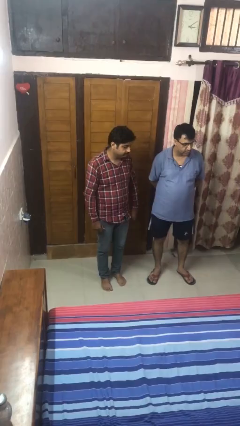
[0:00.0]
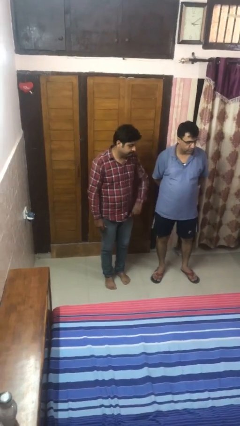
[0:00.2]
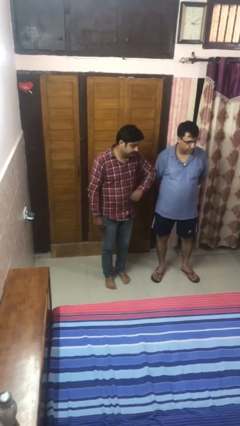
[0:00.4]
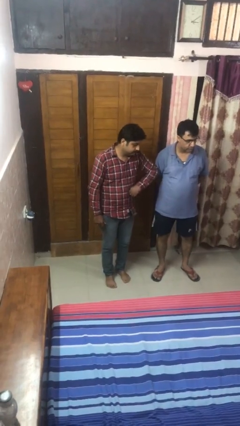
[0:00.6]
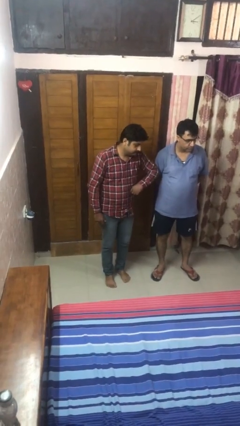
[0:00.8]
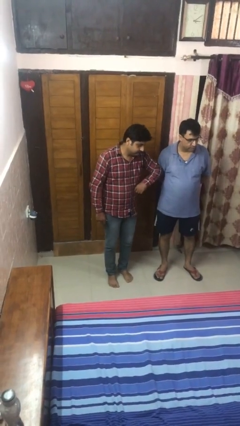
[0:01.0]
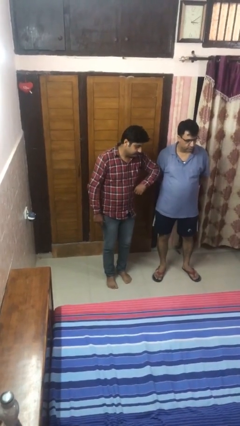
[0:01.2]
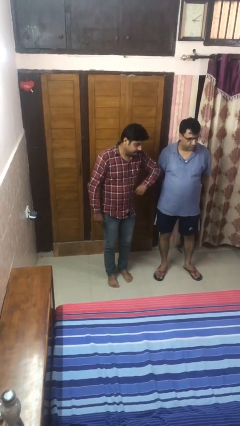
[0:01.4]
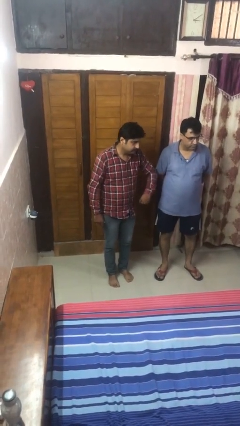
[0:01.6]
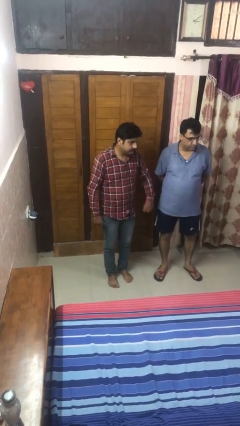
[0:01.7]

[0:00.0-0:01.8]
person nudges person with elbow

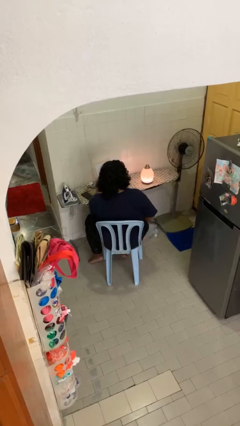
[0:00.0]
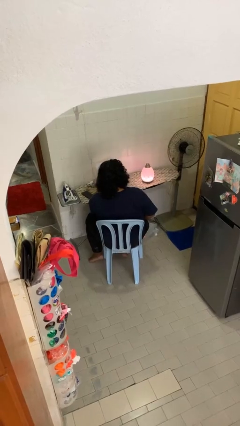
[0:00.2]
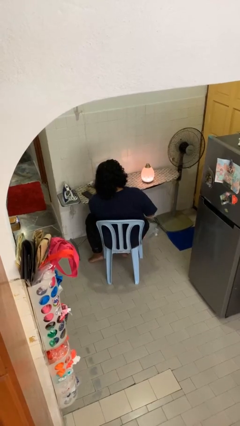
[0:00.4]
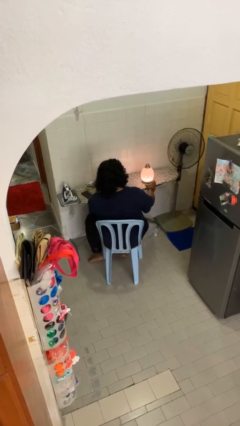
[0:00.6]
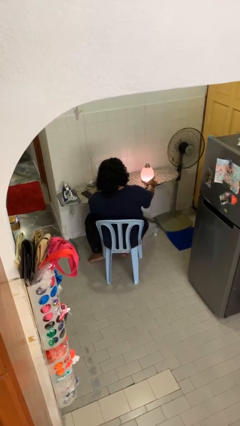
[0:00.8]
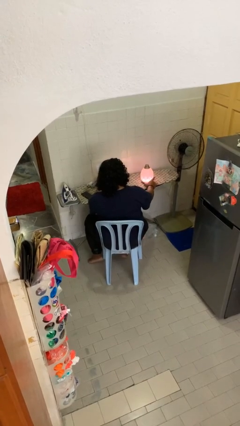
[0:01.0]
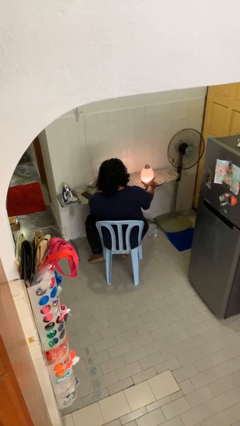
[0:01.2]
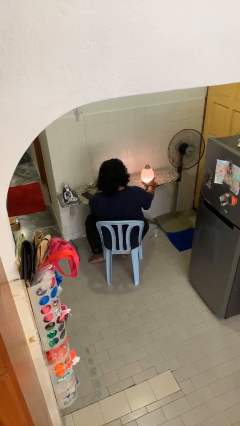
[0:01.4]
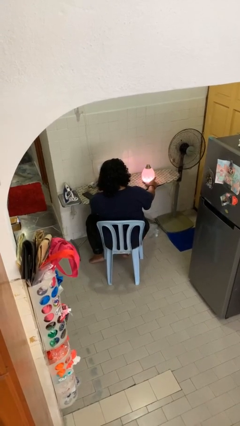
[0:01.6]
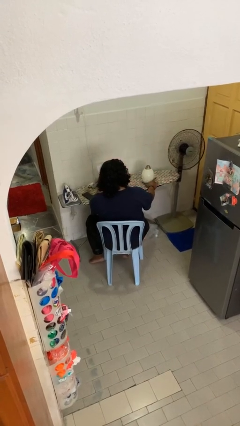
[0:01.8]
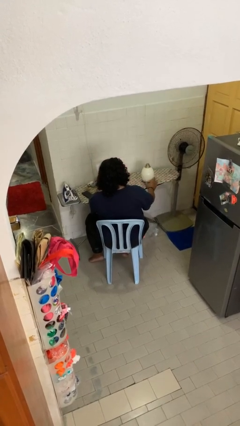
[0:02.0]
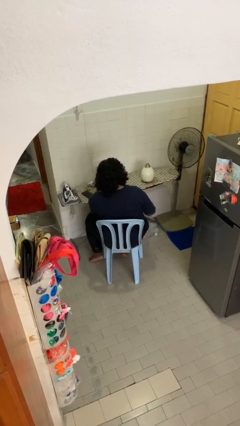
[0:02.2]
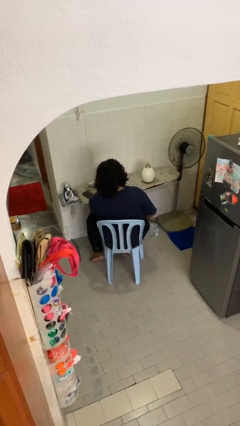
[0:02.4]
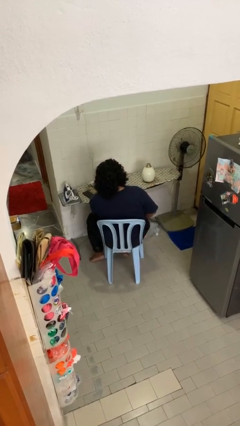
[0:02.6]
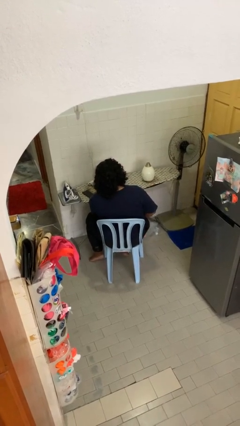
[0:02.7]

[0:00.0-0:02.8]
person turns off lamp

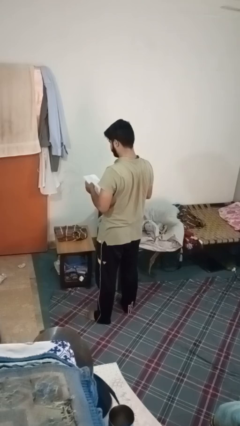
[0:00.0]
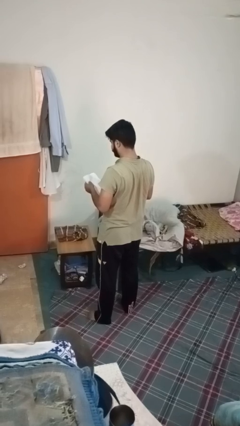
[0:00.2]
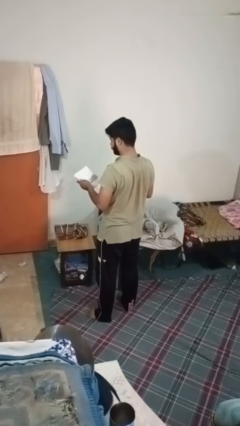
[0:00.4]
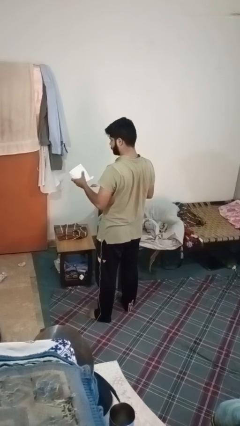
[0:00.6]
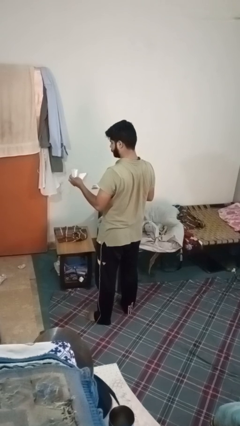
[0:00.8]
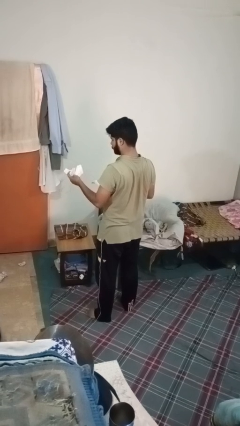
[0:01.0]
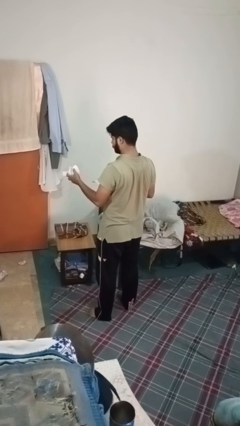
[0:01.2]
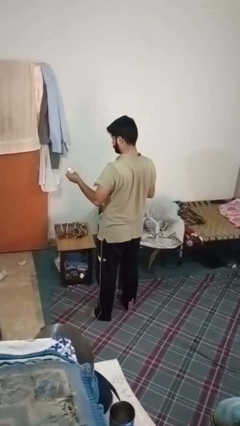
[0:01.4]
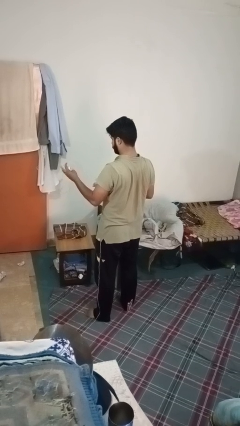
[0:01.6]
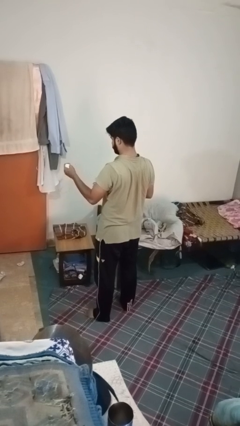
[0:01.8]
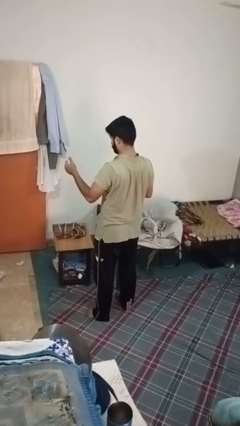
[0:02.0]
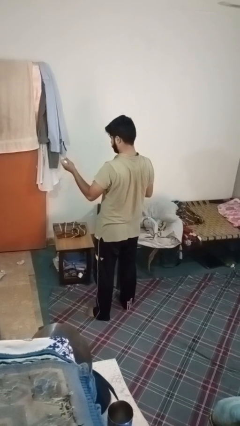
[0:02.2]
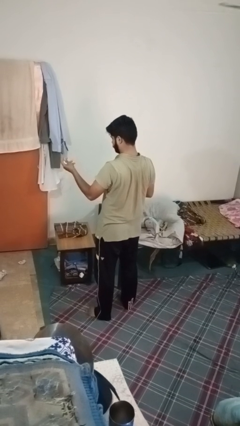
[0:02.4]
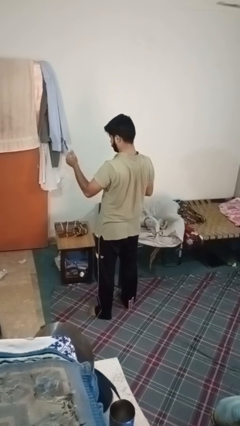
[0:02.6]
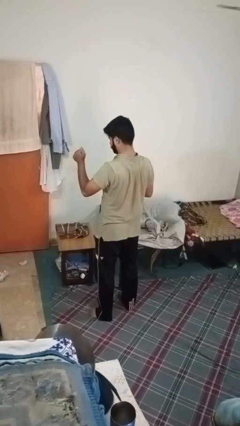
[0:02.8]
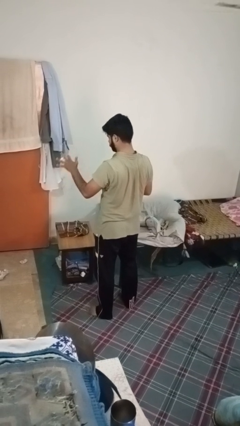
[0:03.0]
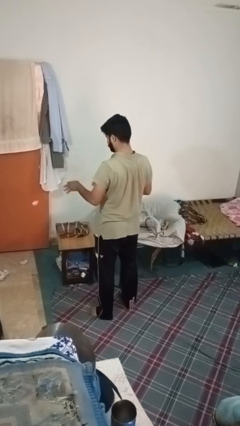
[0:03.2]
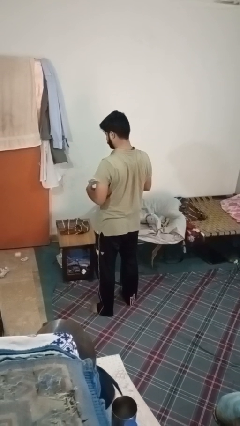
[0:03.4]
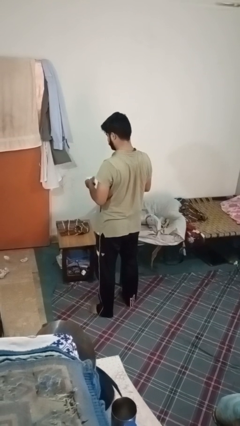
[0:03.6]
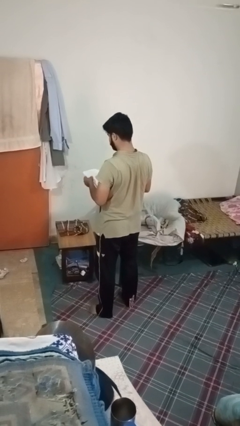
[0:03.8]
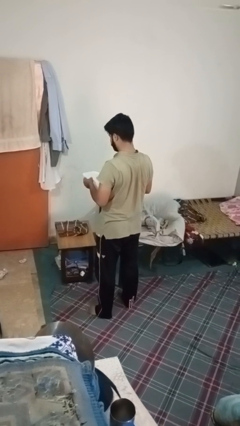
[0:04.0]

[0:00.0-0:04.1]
person crumples paper

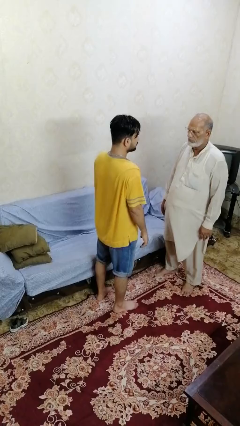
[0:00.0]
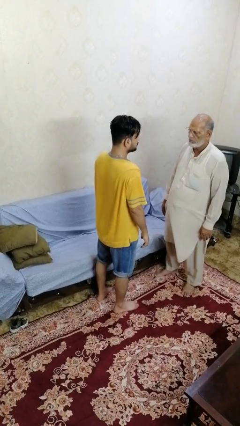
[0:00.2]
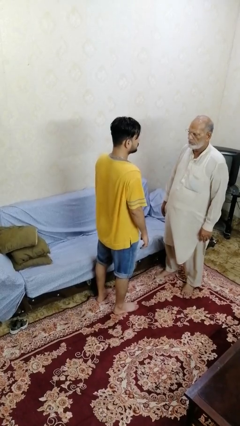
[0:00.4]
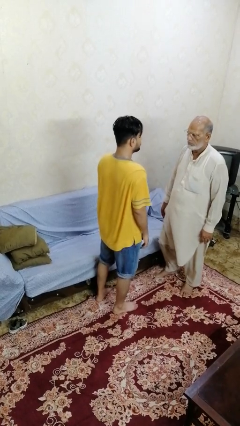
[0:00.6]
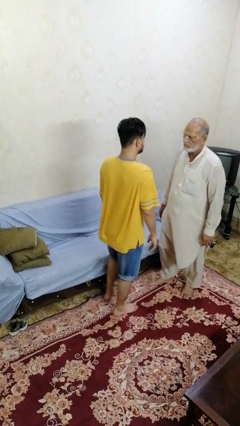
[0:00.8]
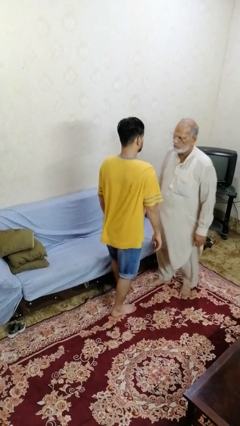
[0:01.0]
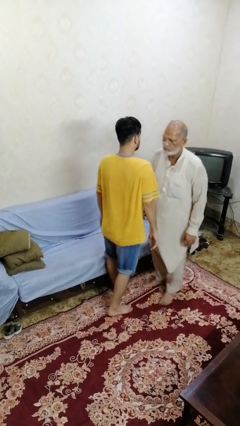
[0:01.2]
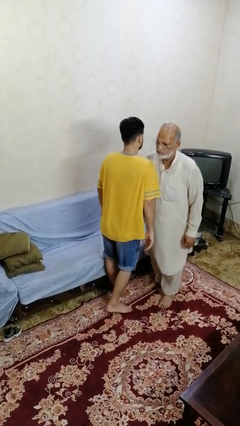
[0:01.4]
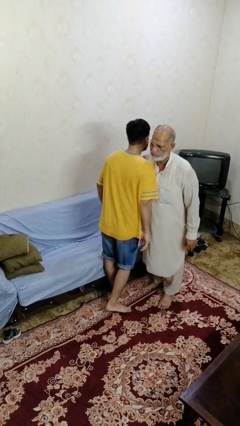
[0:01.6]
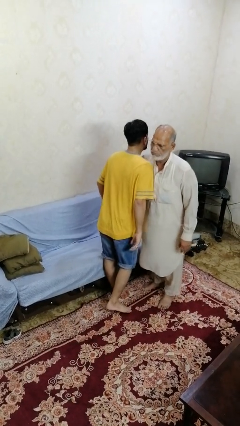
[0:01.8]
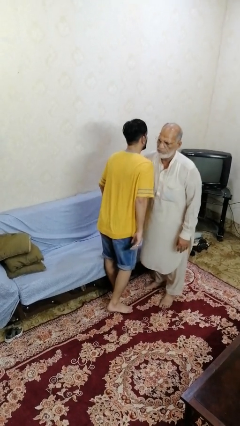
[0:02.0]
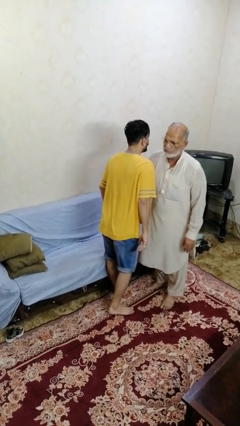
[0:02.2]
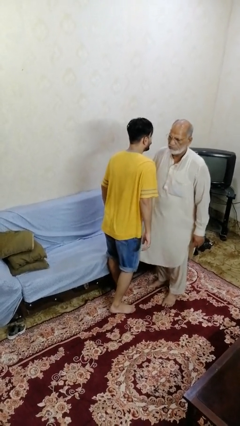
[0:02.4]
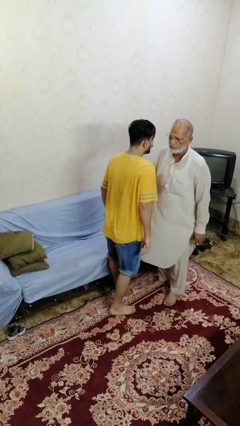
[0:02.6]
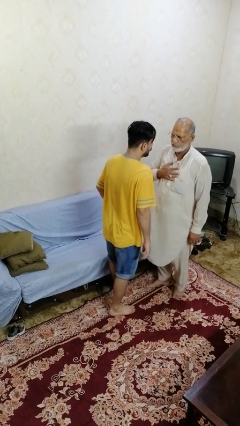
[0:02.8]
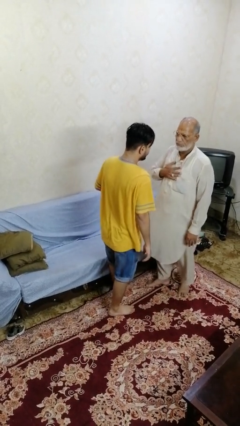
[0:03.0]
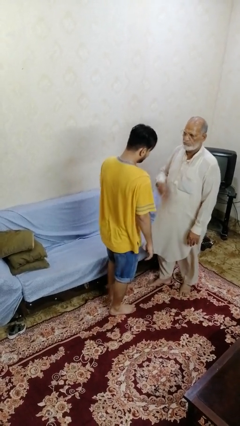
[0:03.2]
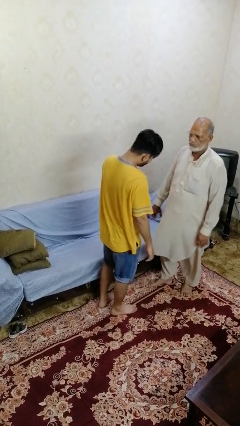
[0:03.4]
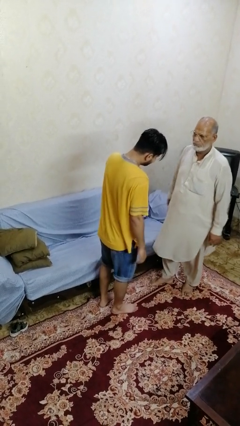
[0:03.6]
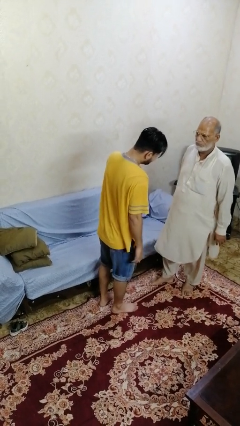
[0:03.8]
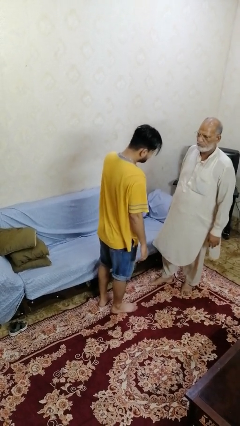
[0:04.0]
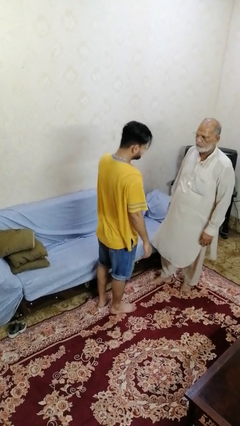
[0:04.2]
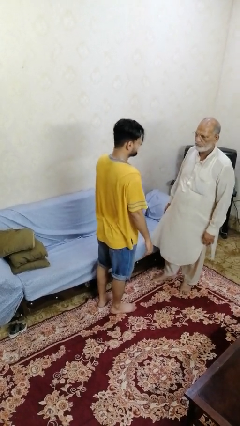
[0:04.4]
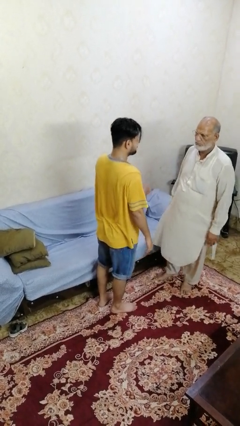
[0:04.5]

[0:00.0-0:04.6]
person bumps into person

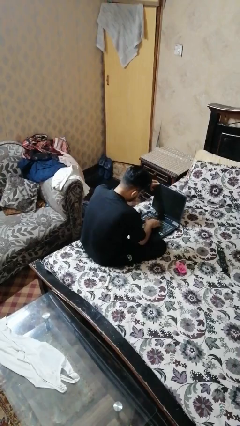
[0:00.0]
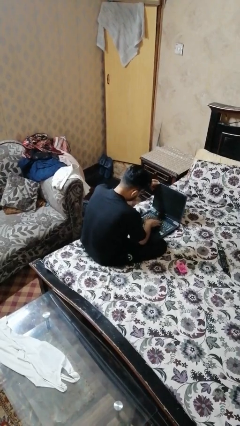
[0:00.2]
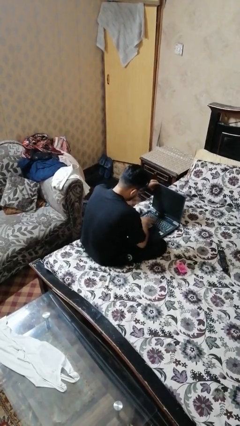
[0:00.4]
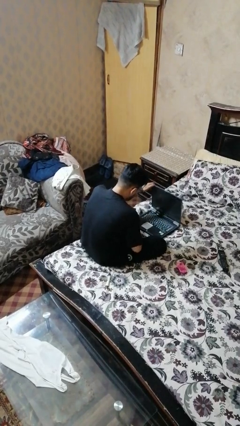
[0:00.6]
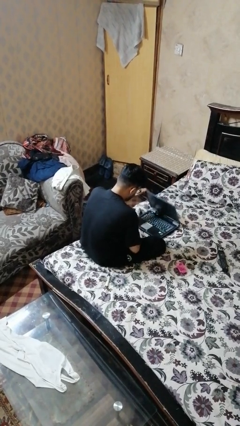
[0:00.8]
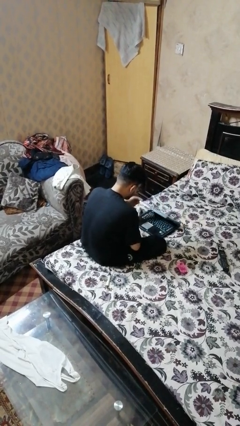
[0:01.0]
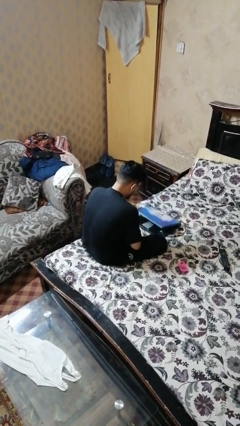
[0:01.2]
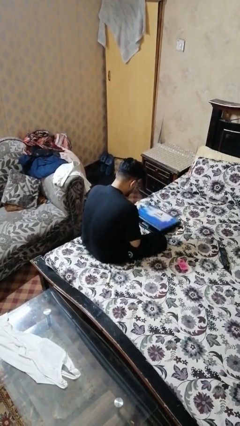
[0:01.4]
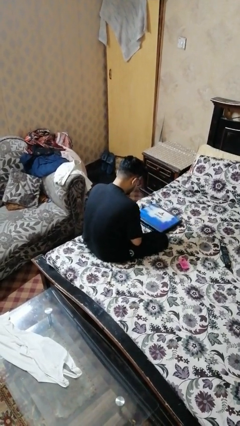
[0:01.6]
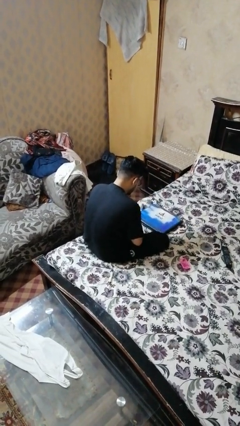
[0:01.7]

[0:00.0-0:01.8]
person closes laptop

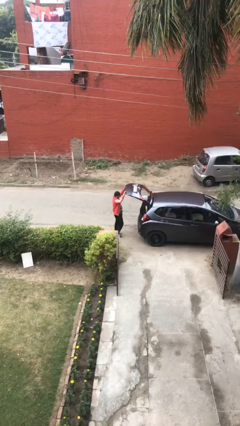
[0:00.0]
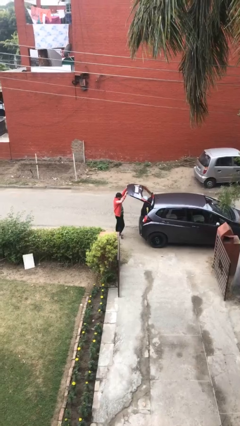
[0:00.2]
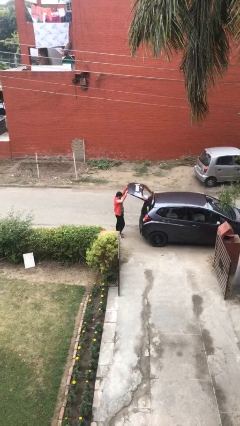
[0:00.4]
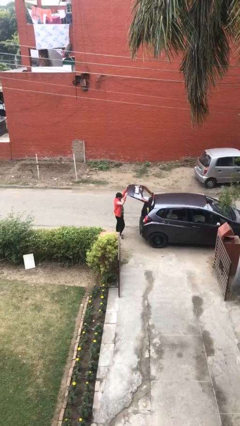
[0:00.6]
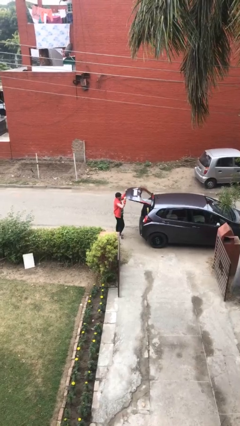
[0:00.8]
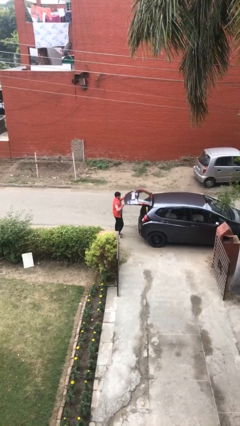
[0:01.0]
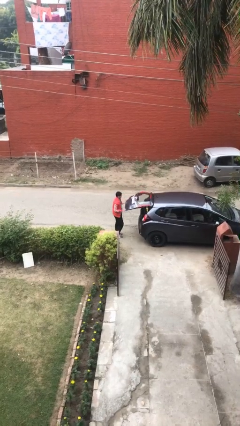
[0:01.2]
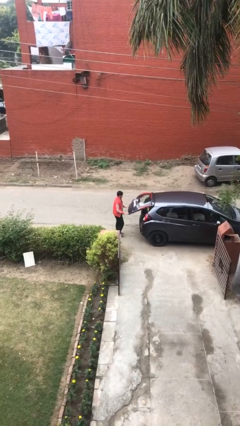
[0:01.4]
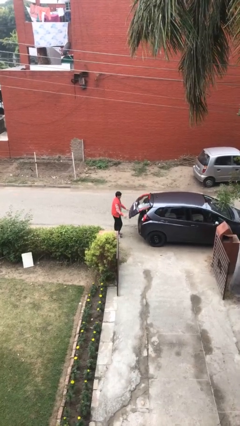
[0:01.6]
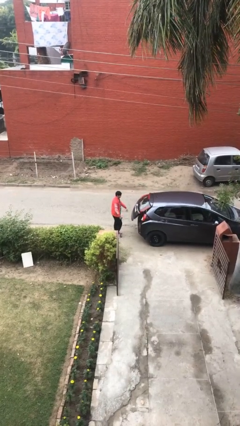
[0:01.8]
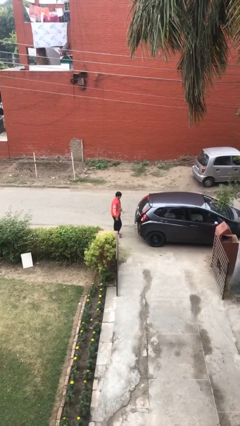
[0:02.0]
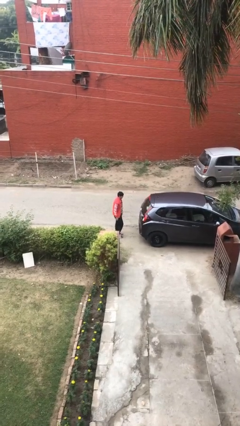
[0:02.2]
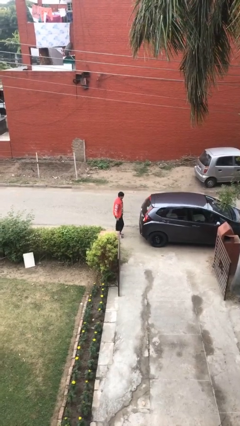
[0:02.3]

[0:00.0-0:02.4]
person closes car trunk
